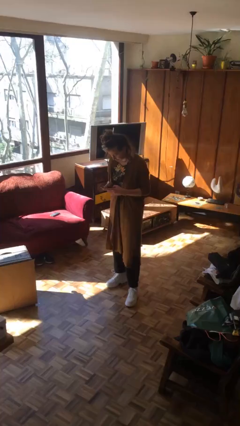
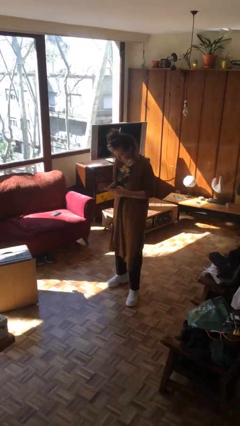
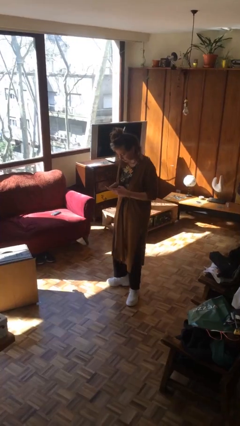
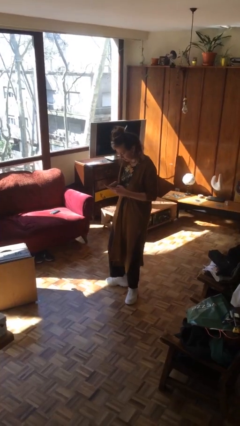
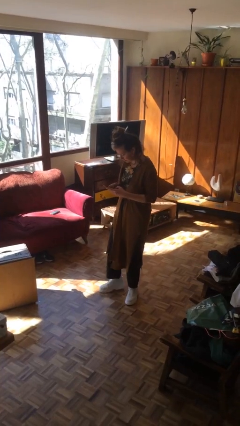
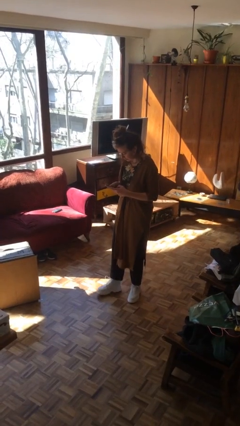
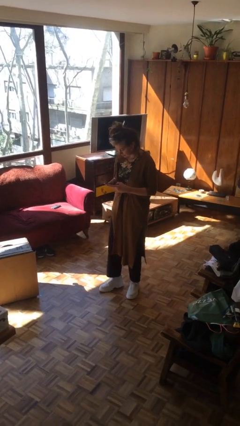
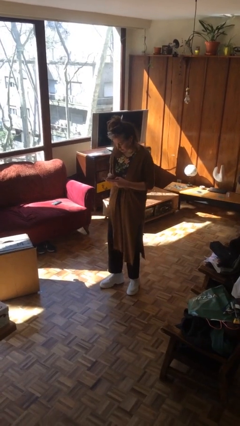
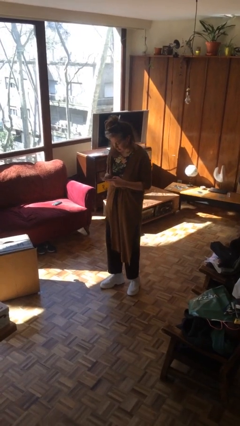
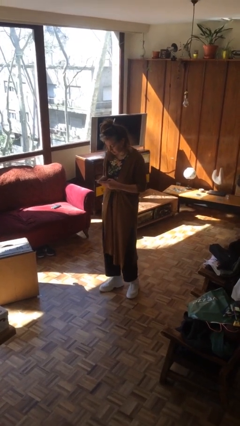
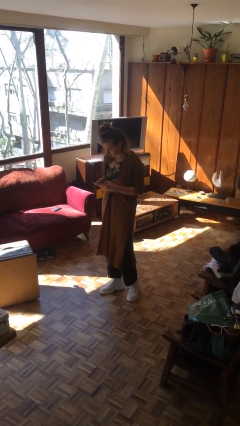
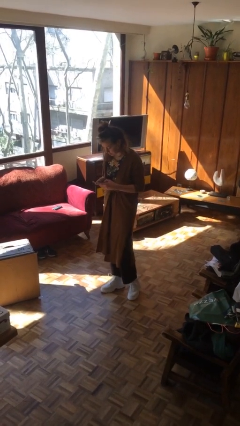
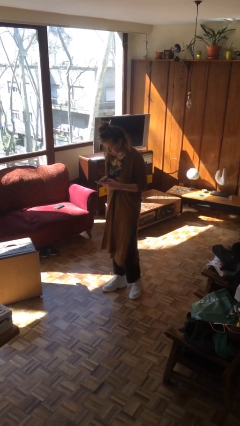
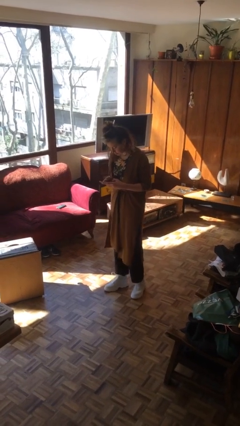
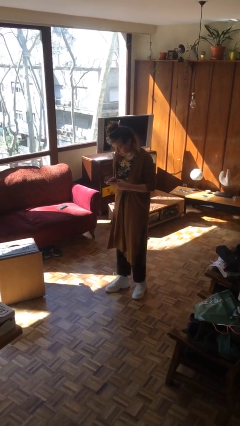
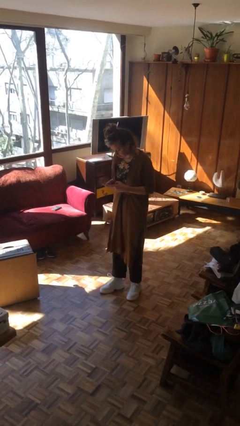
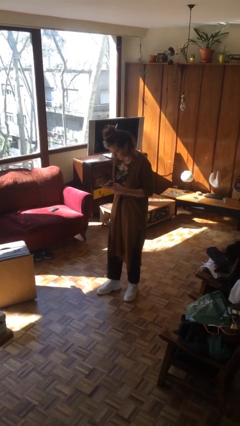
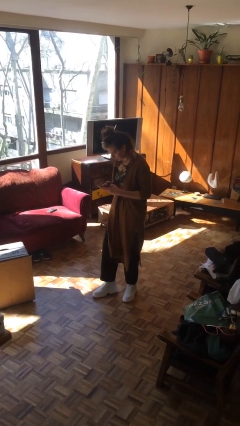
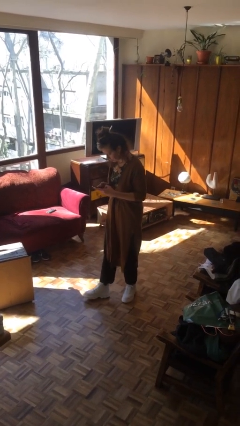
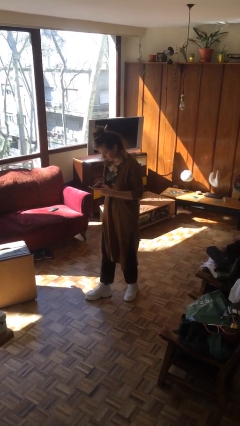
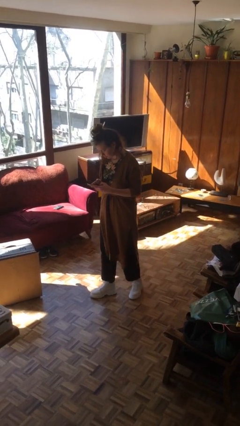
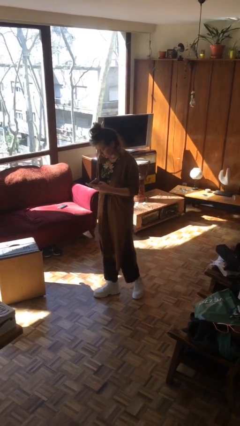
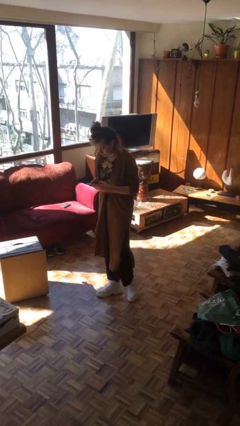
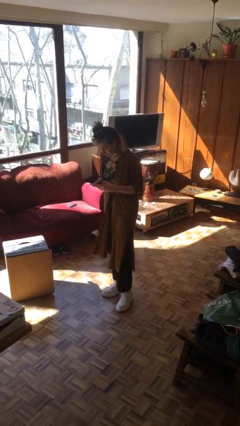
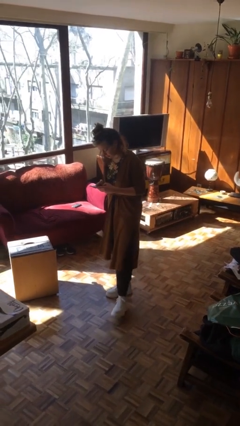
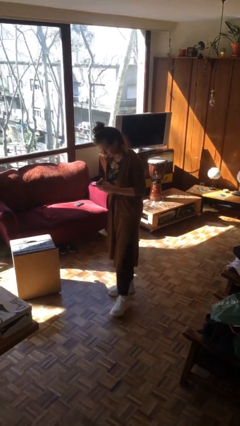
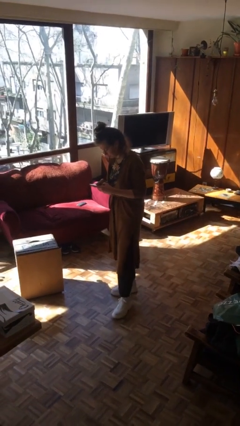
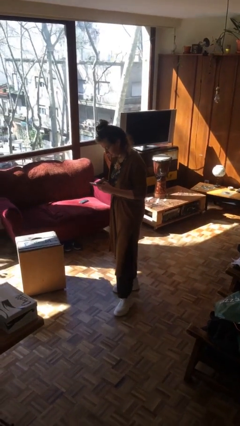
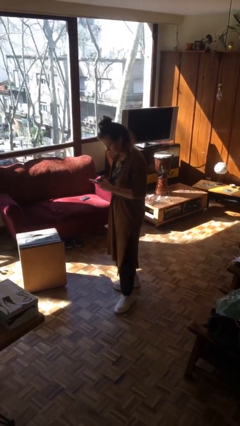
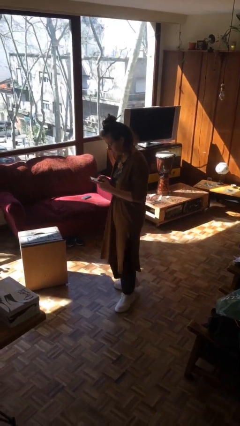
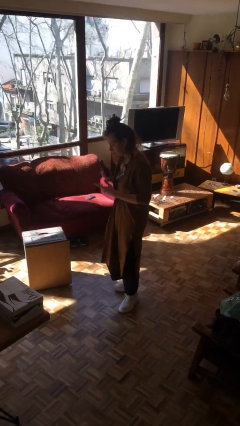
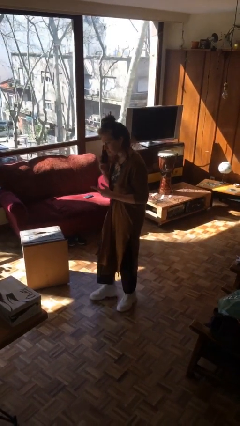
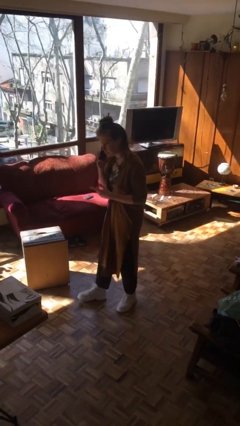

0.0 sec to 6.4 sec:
person texts on phone

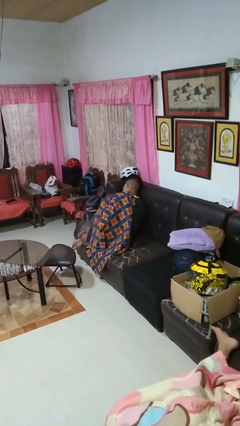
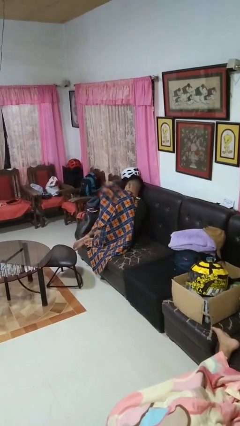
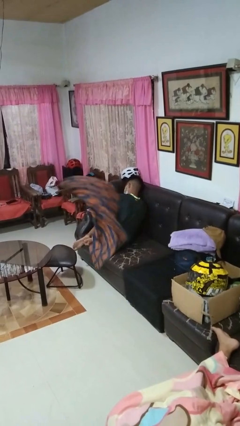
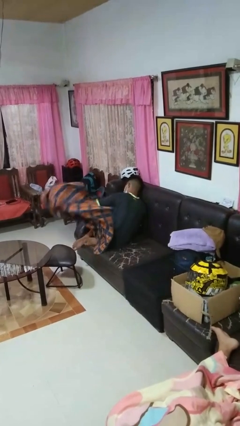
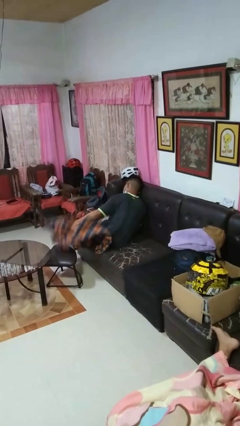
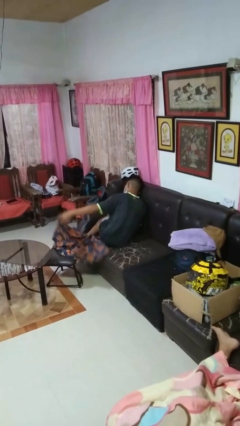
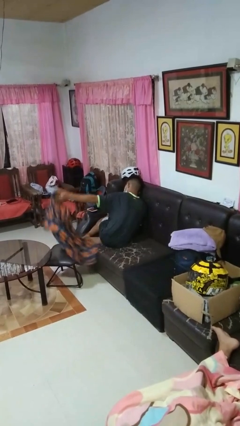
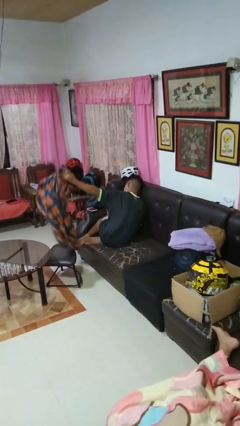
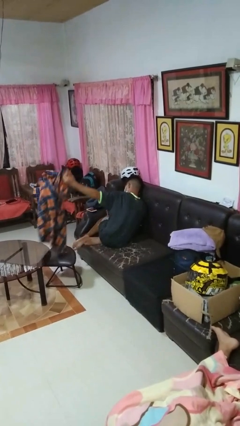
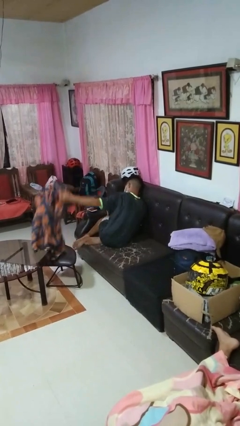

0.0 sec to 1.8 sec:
person uncovers with blanket

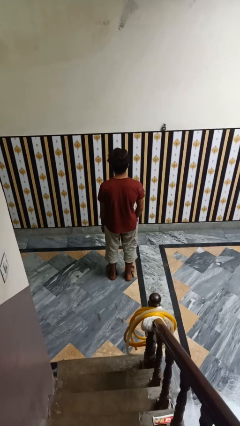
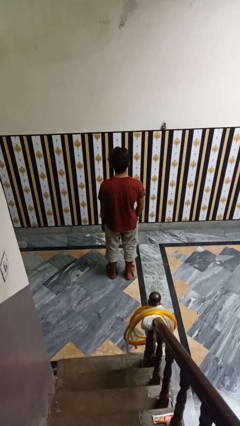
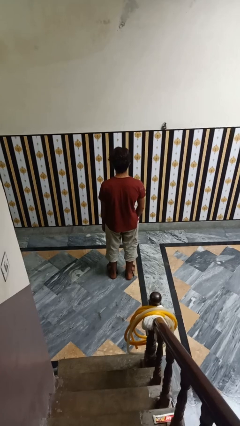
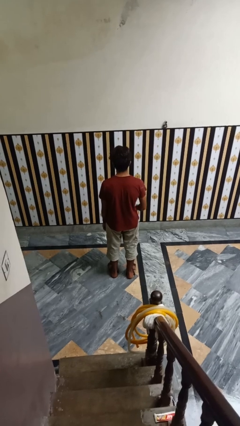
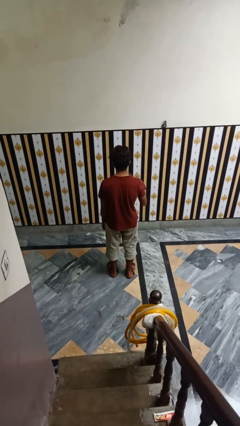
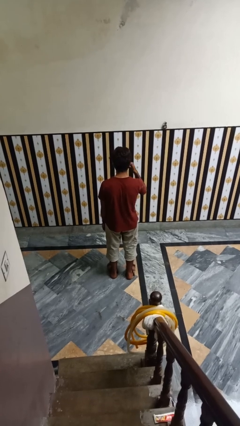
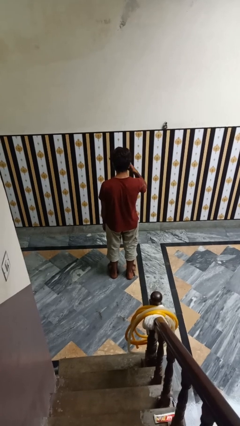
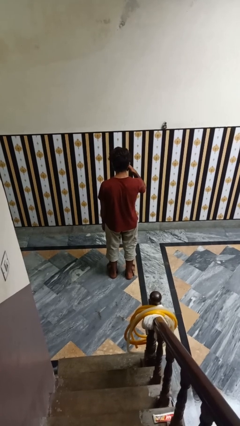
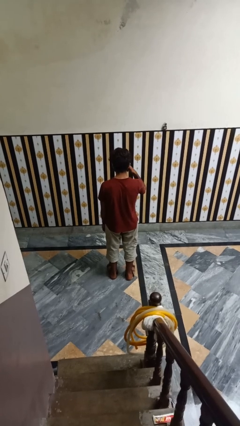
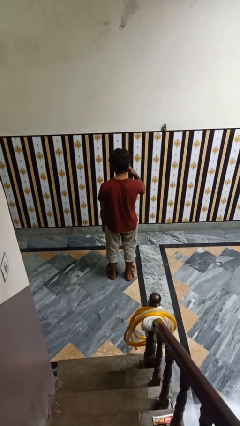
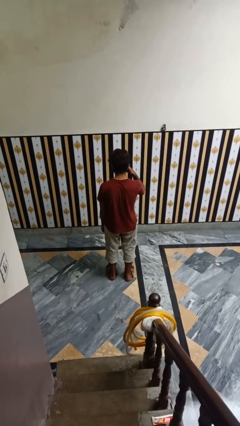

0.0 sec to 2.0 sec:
person gestures call me

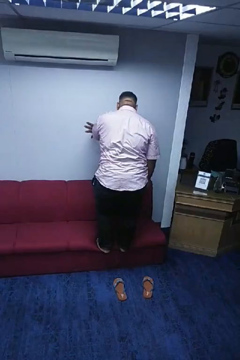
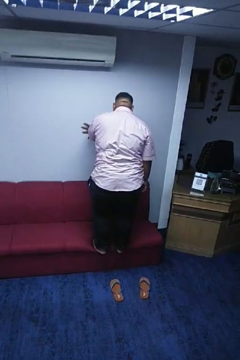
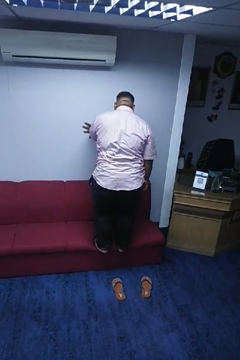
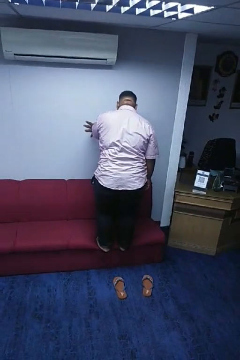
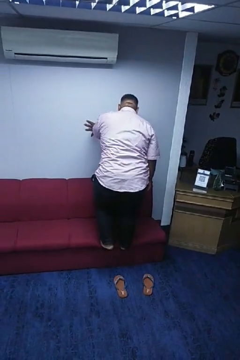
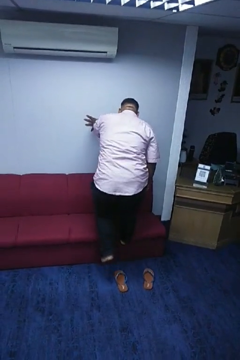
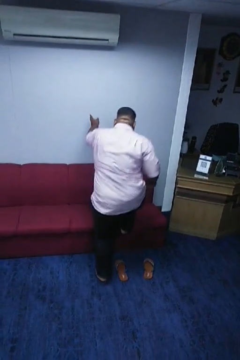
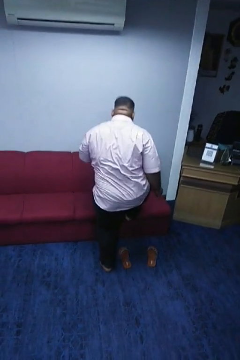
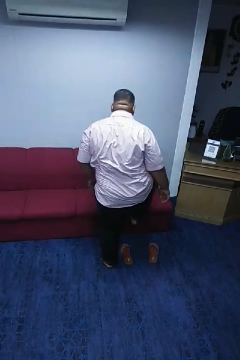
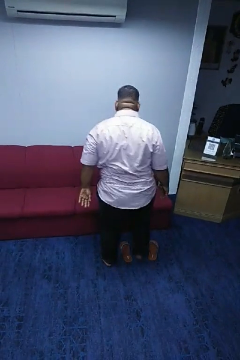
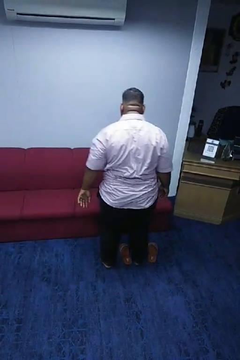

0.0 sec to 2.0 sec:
person climbs off couch

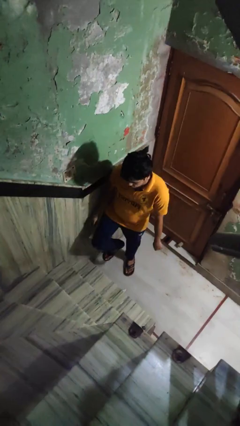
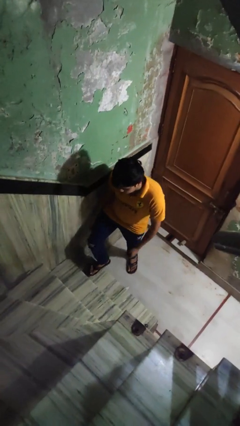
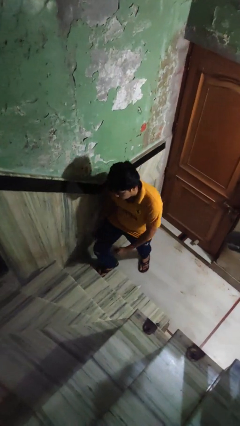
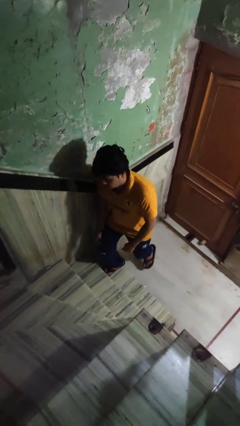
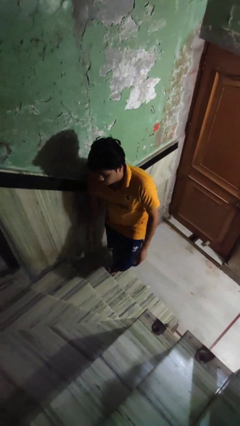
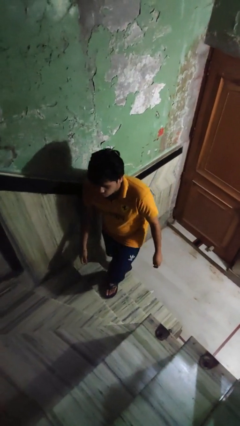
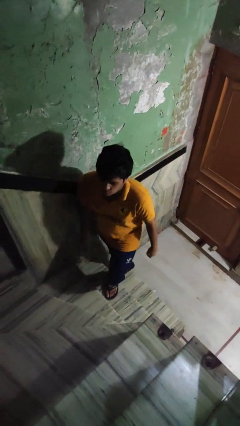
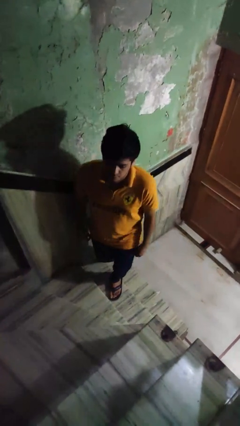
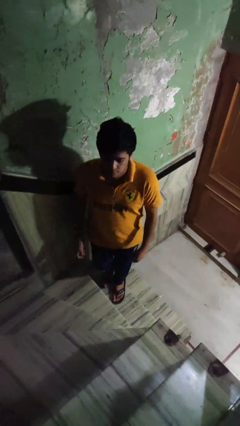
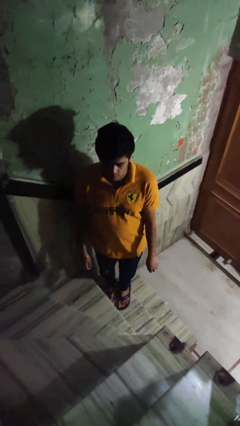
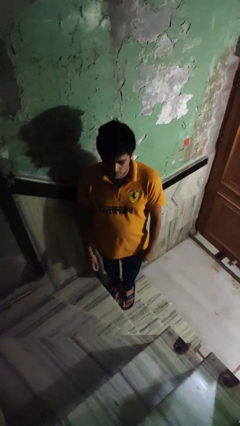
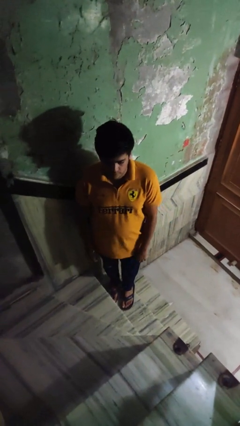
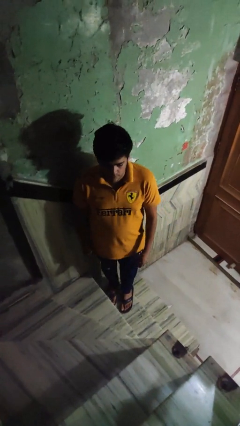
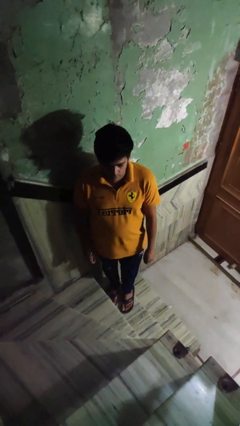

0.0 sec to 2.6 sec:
person climbs up stairs

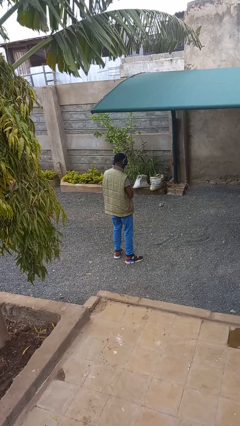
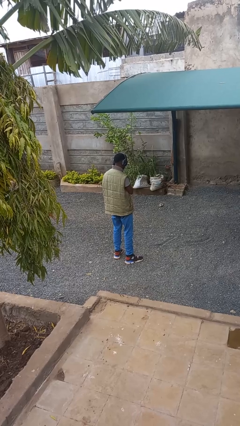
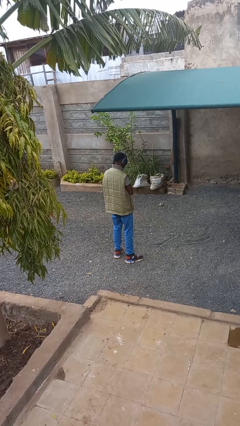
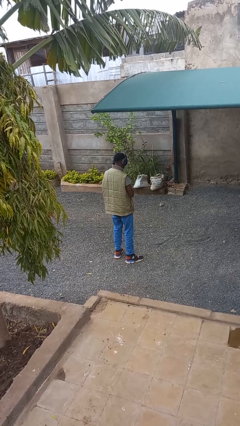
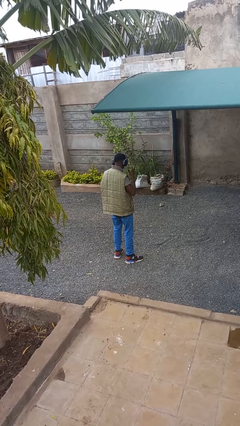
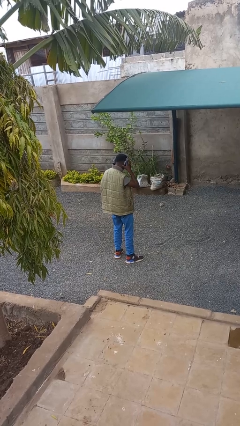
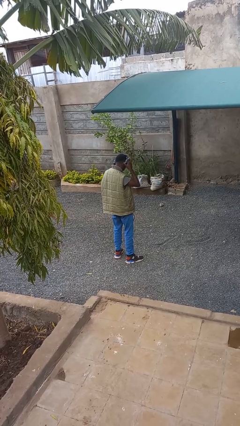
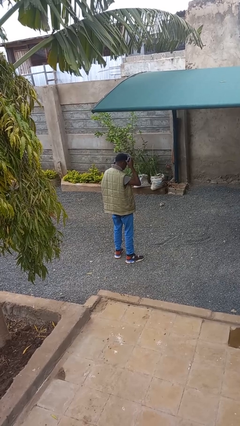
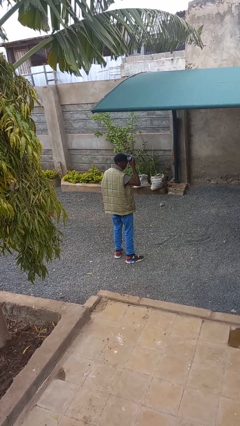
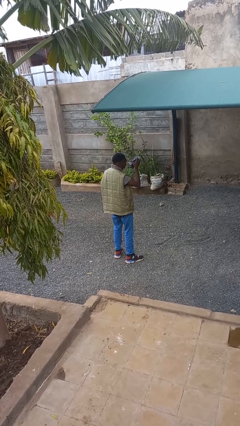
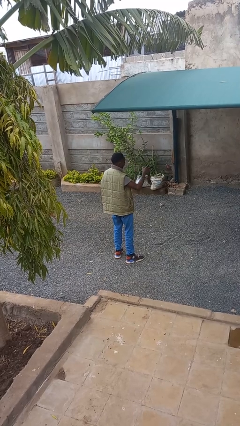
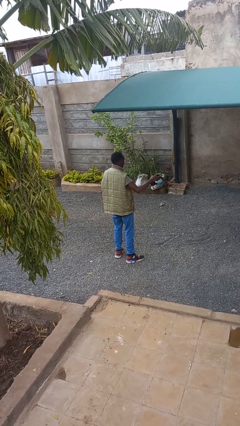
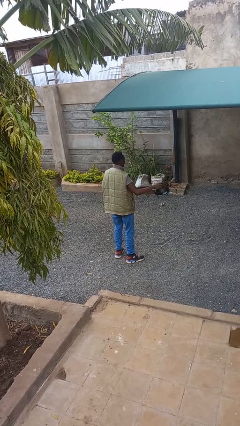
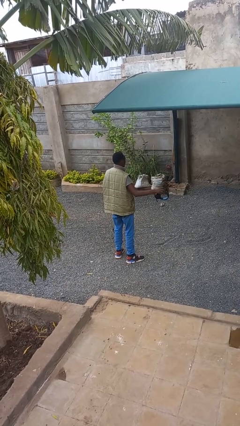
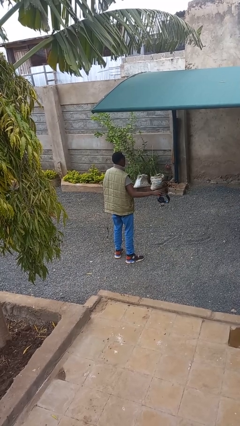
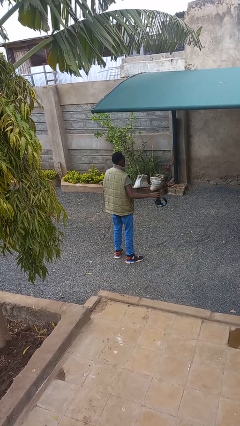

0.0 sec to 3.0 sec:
person takes off headphones
